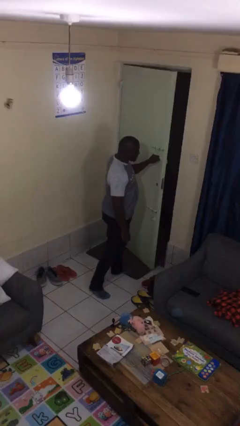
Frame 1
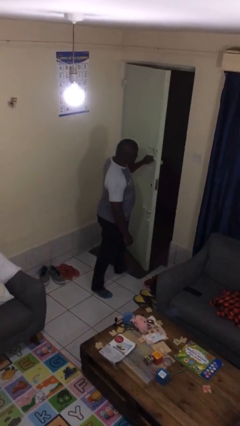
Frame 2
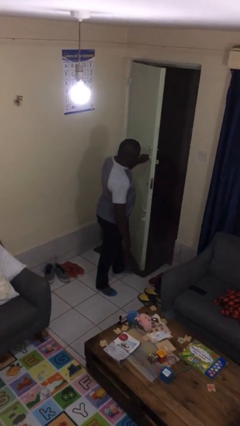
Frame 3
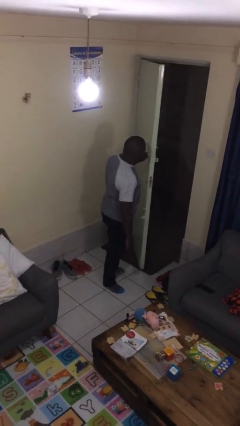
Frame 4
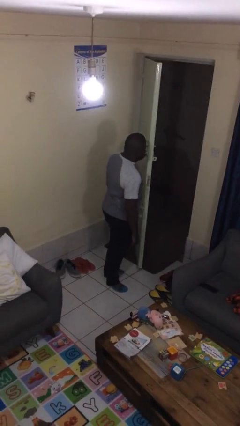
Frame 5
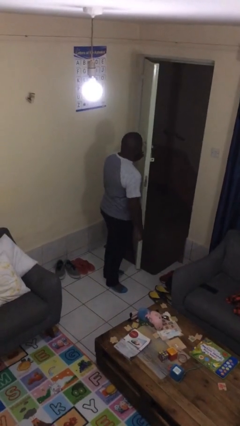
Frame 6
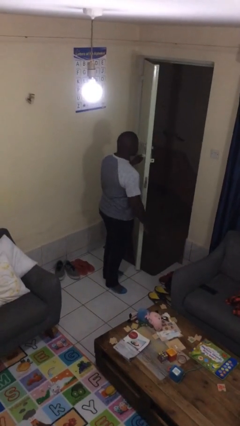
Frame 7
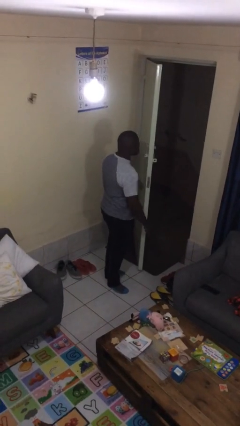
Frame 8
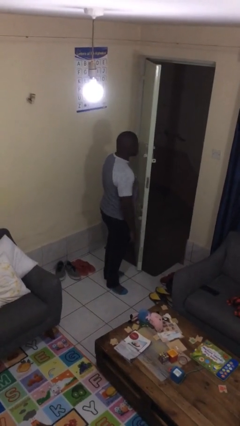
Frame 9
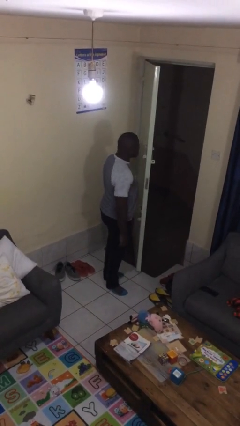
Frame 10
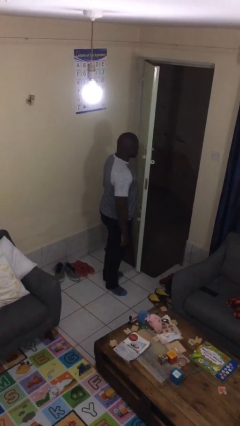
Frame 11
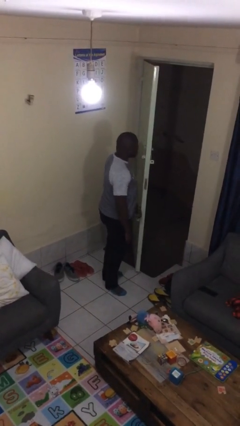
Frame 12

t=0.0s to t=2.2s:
person opens facility door

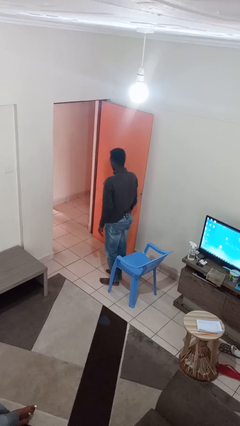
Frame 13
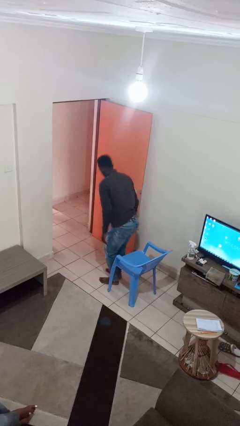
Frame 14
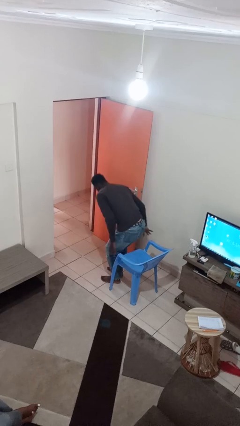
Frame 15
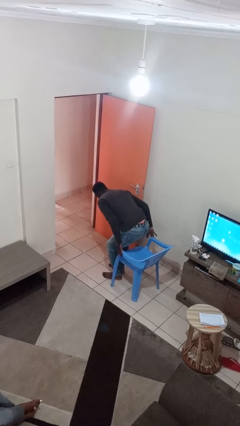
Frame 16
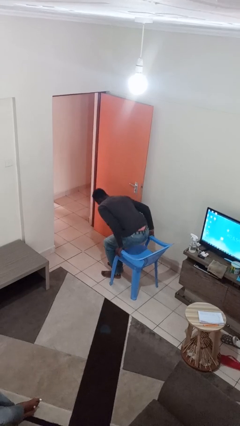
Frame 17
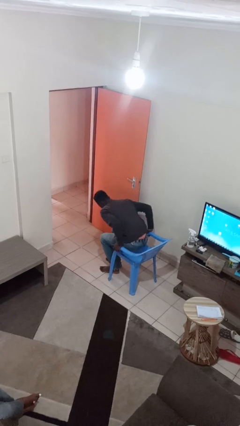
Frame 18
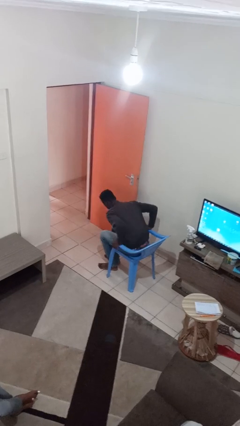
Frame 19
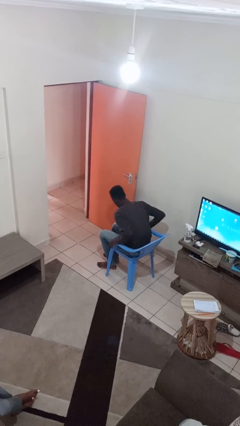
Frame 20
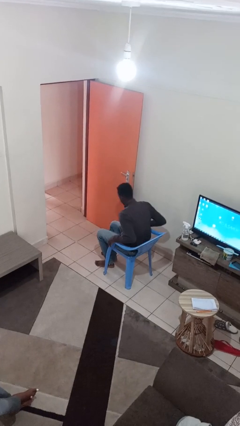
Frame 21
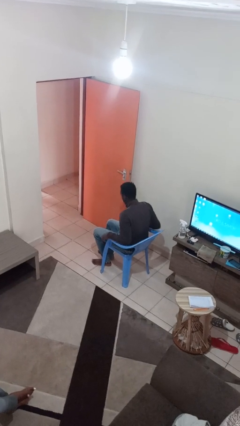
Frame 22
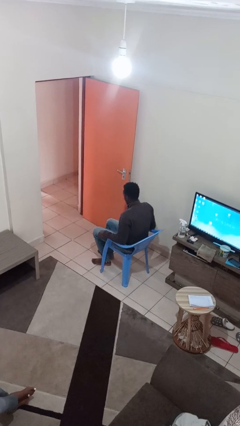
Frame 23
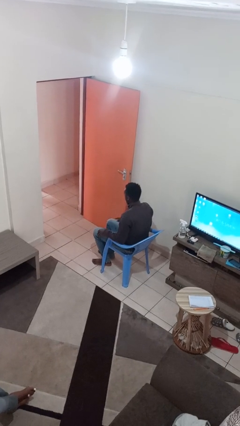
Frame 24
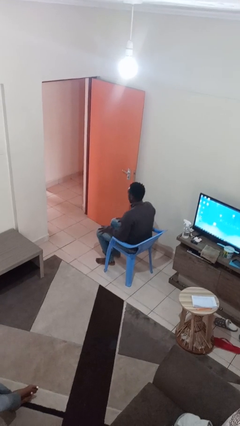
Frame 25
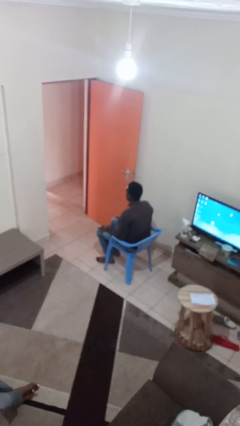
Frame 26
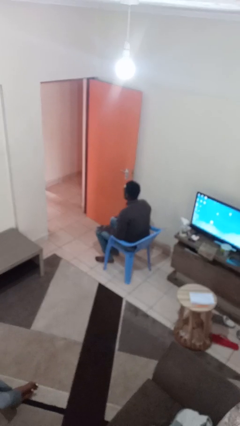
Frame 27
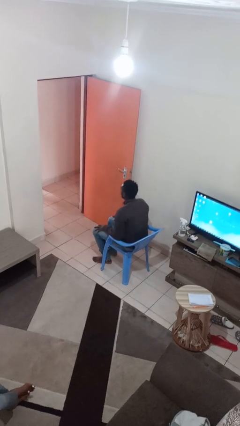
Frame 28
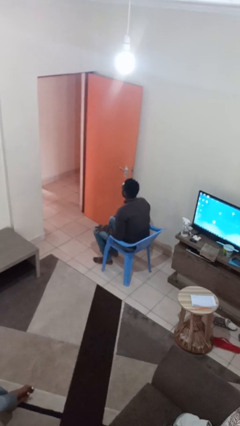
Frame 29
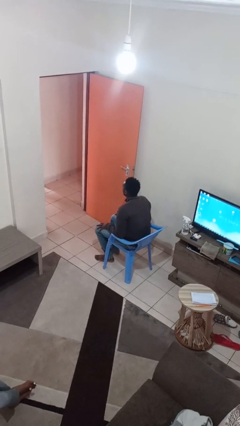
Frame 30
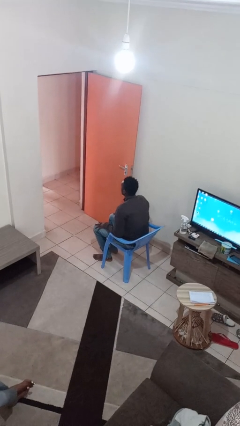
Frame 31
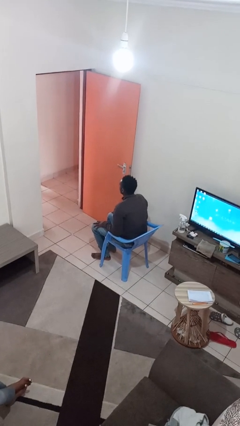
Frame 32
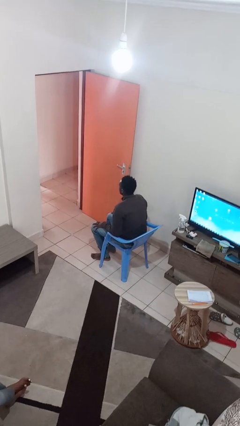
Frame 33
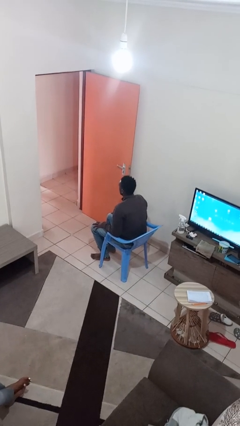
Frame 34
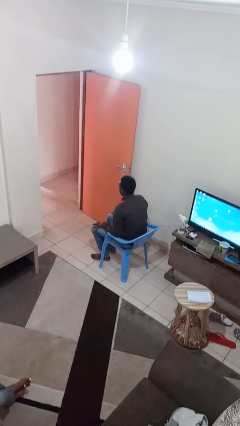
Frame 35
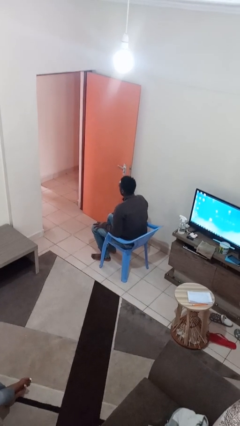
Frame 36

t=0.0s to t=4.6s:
person sits down

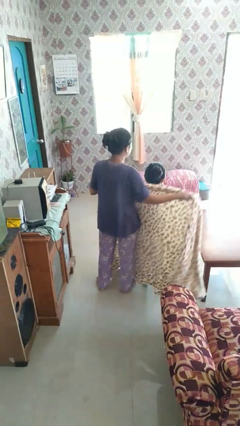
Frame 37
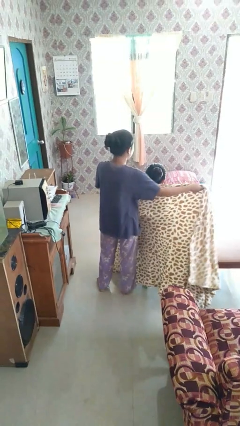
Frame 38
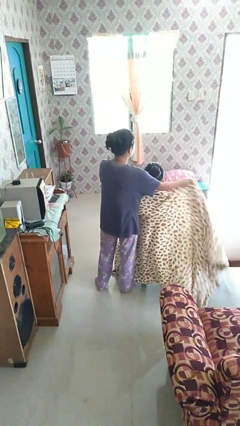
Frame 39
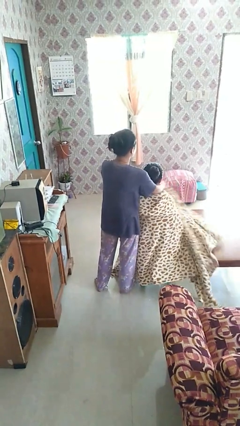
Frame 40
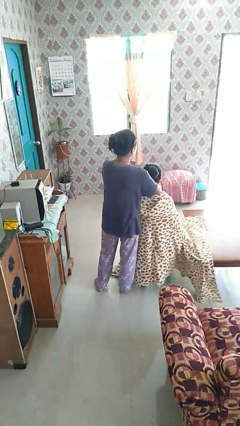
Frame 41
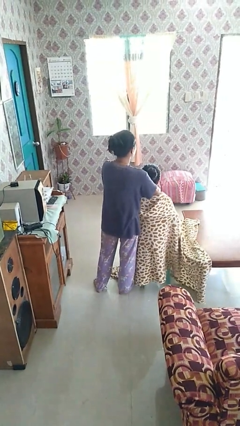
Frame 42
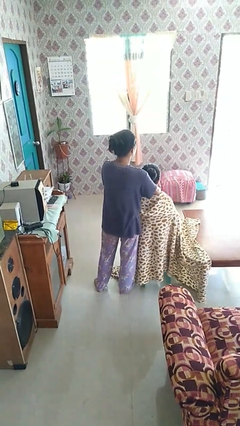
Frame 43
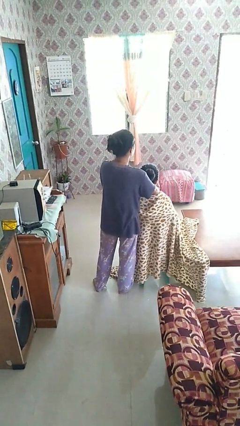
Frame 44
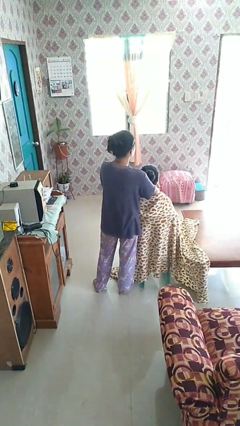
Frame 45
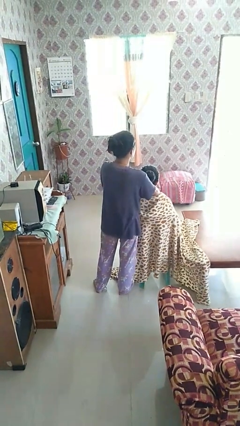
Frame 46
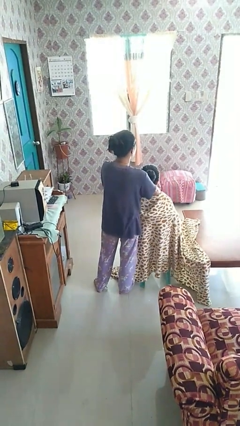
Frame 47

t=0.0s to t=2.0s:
person covers friend with blanket

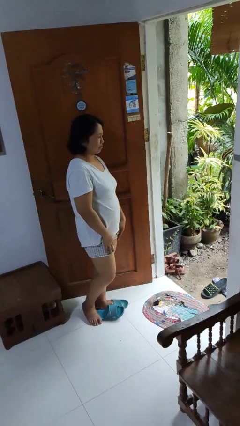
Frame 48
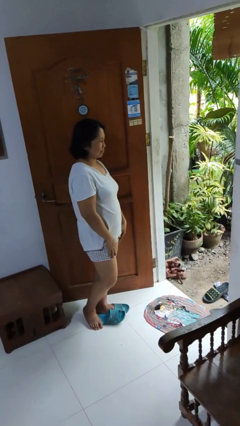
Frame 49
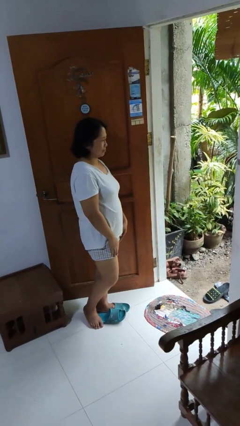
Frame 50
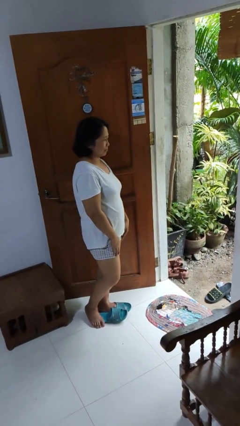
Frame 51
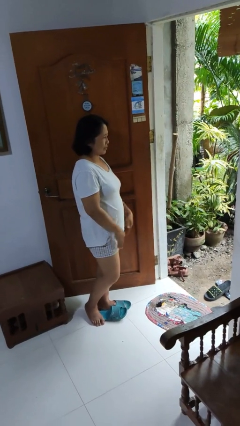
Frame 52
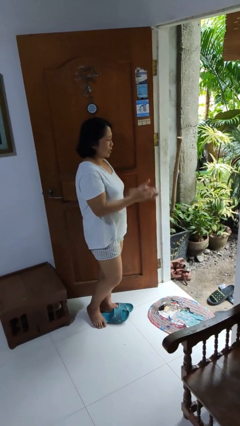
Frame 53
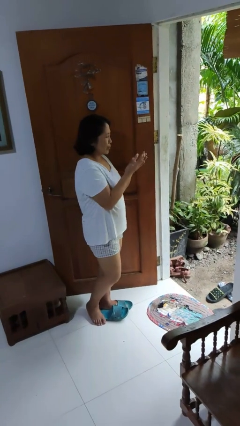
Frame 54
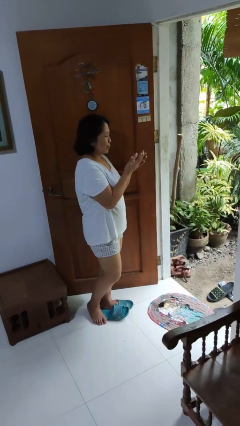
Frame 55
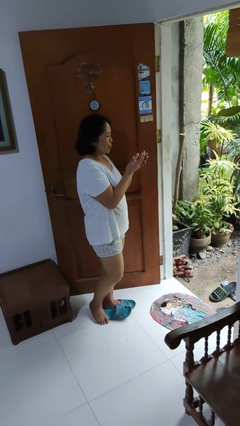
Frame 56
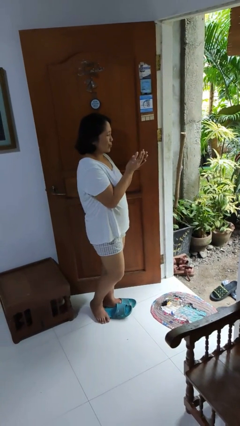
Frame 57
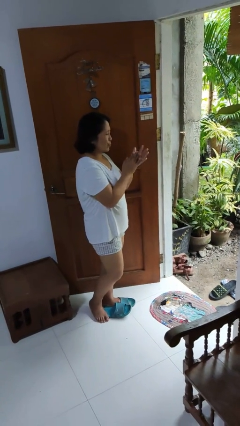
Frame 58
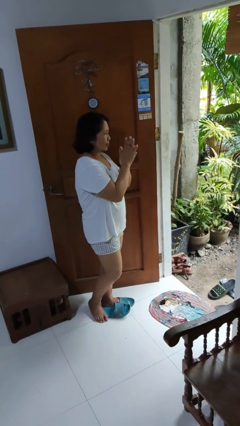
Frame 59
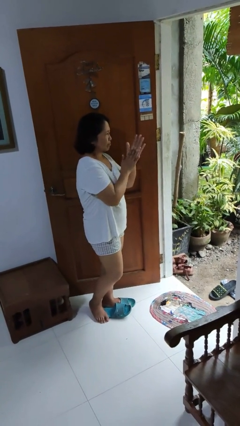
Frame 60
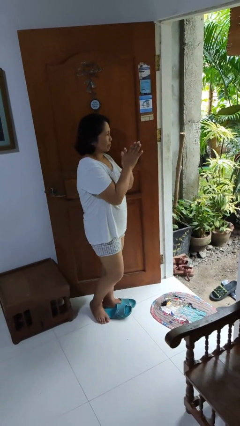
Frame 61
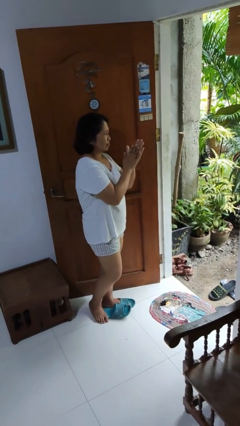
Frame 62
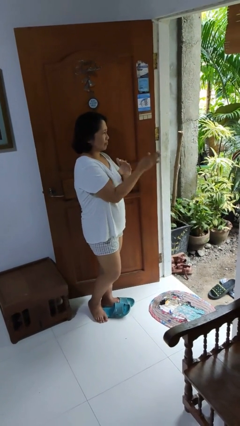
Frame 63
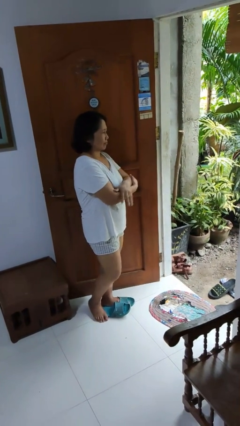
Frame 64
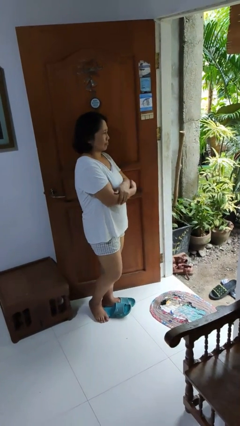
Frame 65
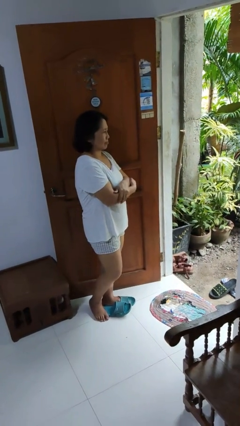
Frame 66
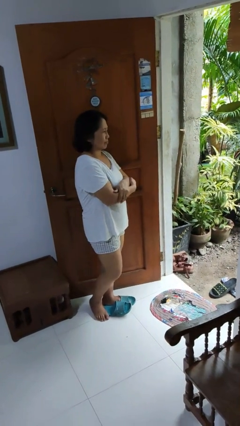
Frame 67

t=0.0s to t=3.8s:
person blows into hands

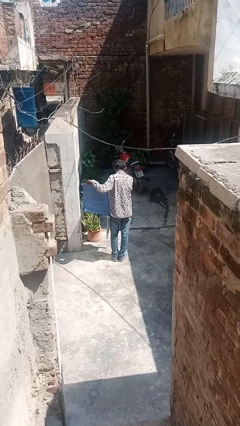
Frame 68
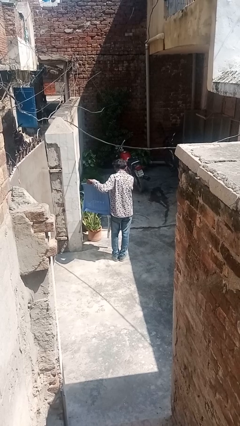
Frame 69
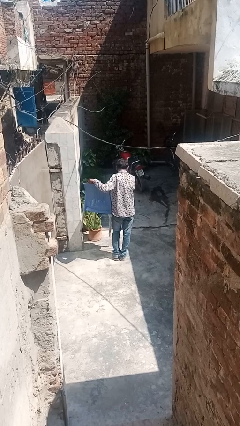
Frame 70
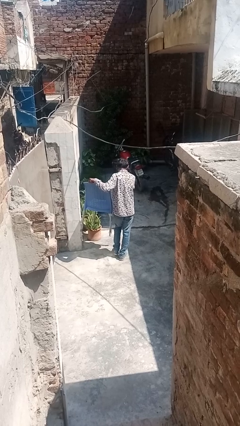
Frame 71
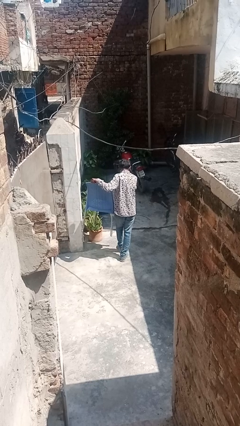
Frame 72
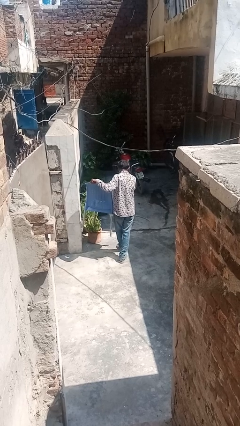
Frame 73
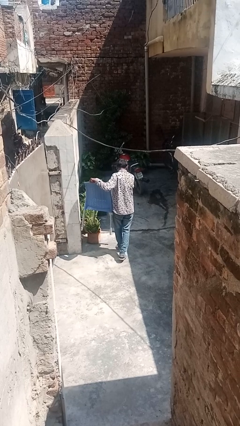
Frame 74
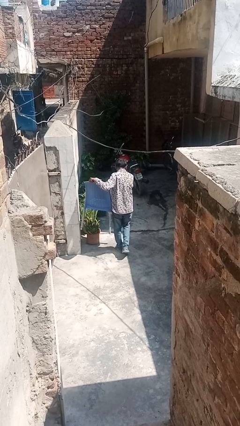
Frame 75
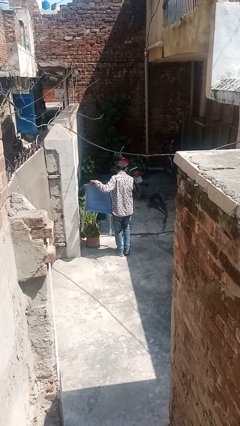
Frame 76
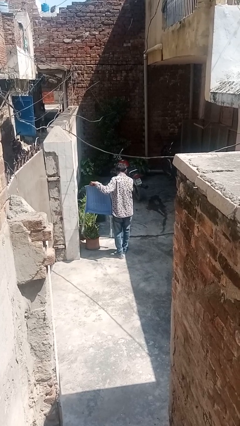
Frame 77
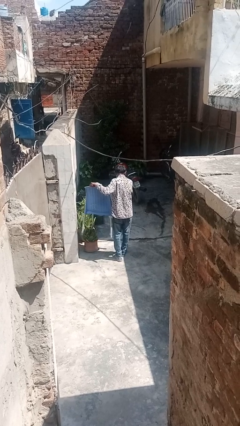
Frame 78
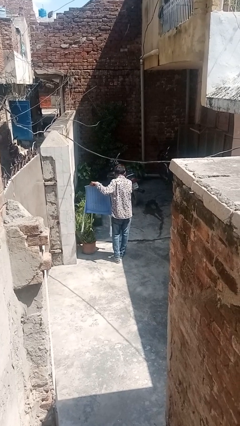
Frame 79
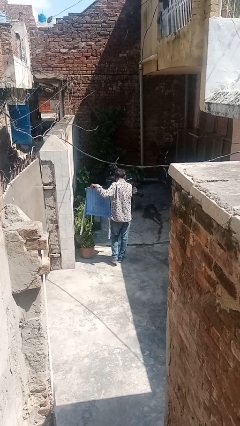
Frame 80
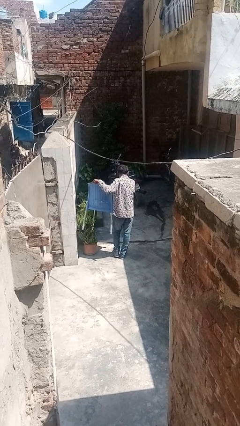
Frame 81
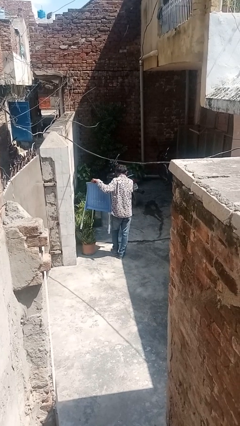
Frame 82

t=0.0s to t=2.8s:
person carries furniture

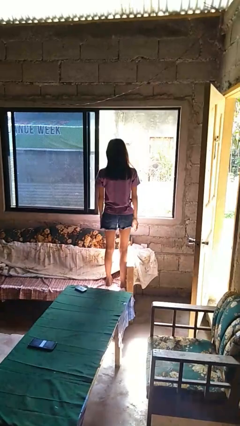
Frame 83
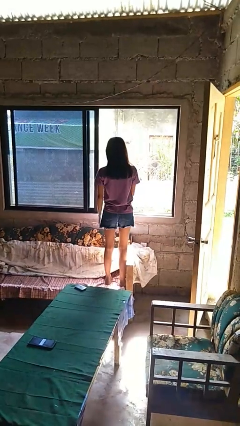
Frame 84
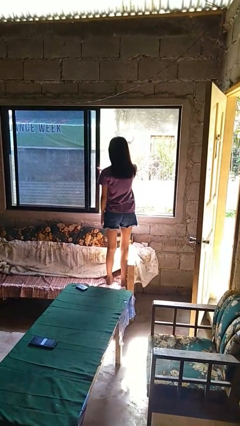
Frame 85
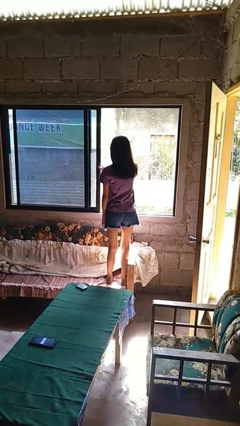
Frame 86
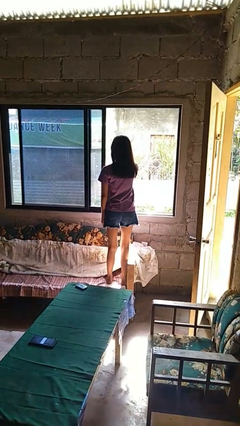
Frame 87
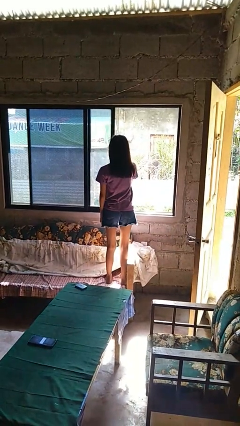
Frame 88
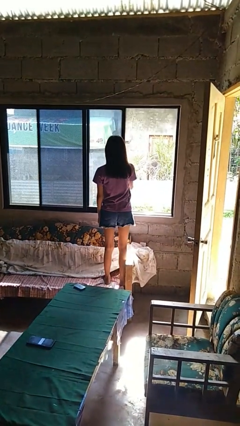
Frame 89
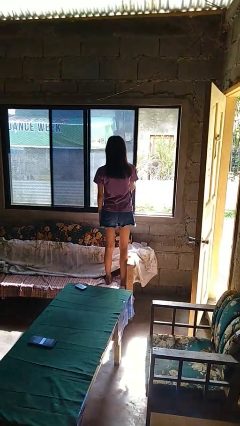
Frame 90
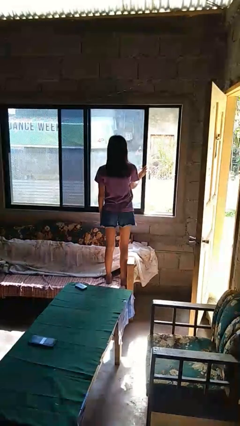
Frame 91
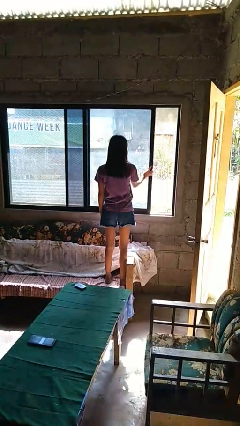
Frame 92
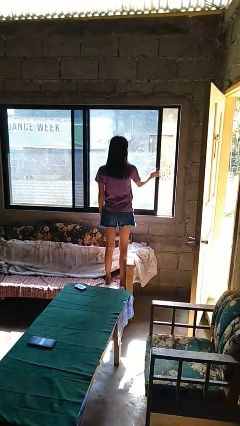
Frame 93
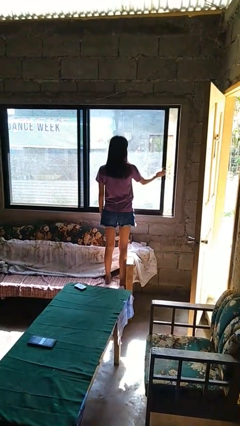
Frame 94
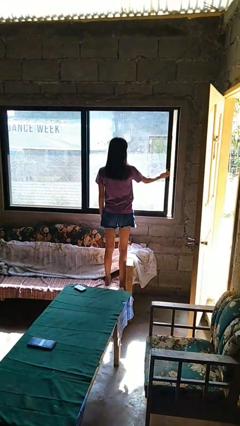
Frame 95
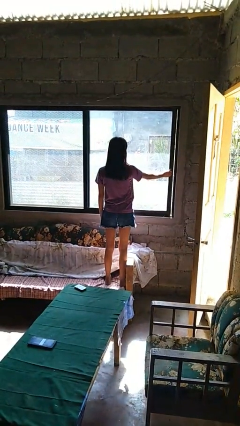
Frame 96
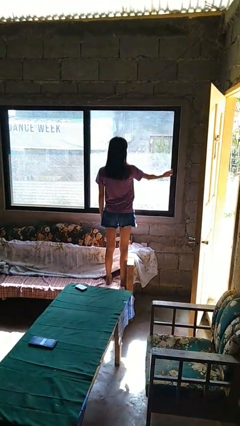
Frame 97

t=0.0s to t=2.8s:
person closes home window
